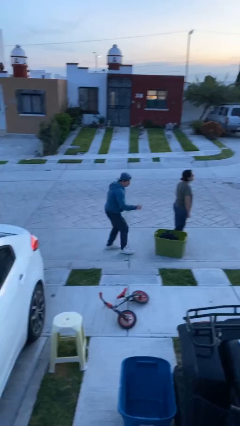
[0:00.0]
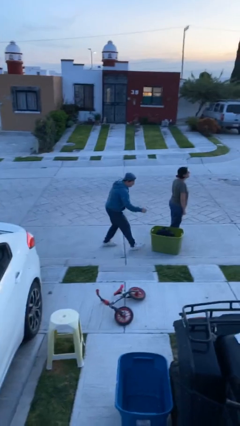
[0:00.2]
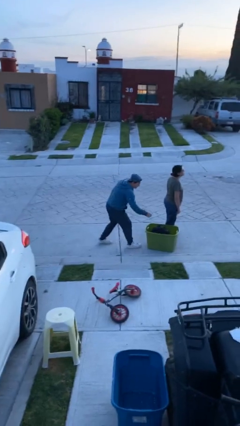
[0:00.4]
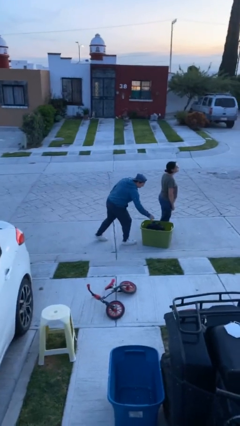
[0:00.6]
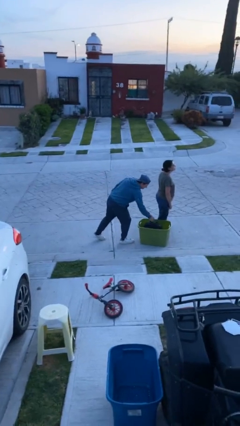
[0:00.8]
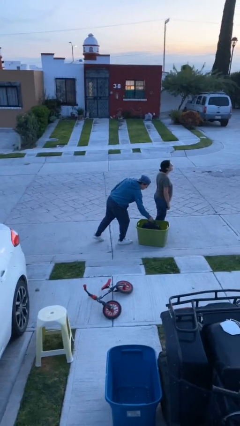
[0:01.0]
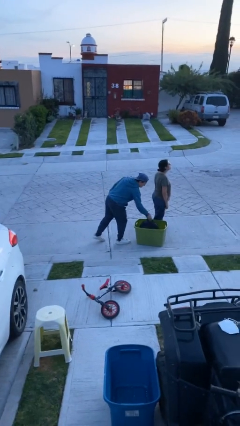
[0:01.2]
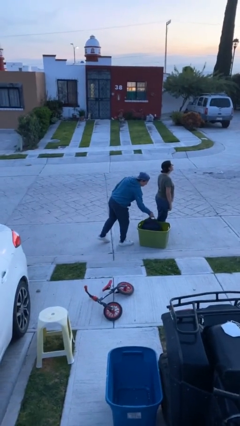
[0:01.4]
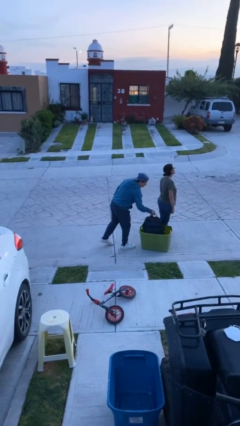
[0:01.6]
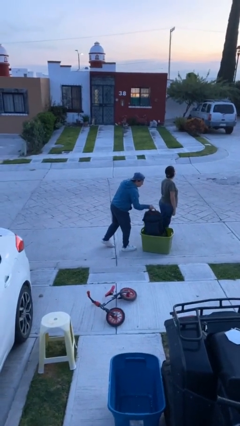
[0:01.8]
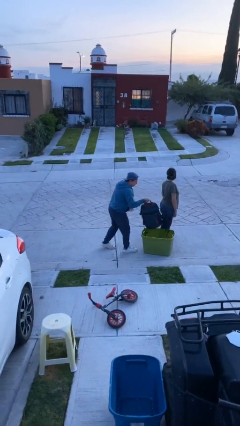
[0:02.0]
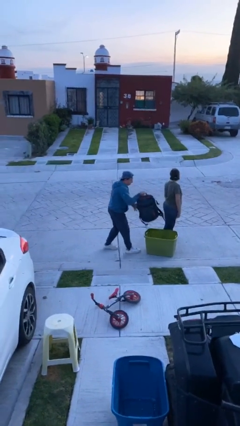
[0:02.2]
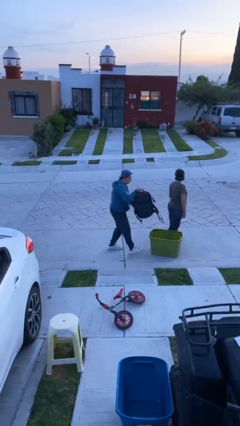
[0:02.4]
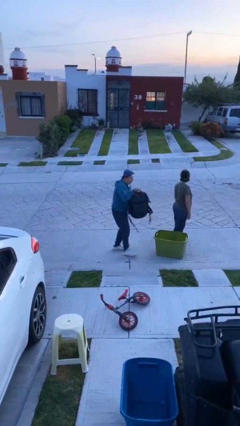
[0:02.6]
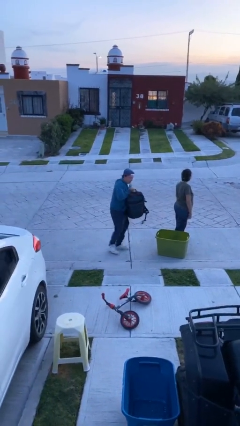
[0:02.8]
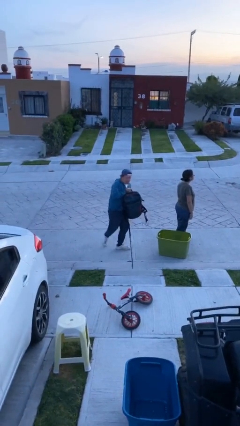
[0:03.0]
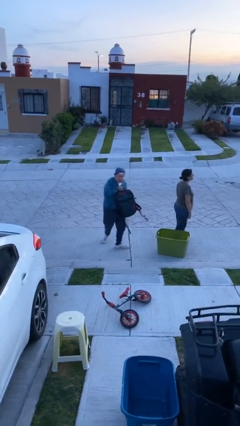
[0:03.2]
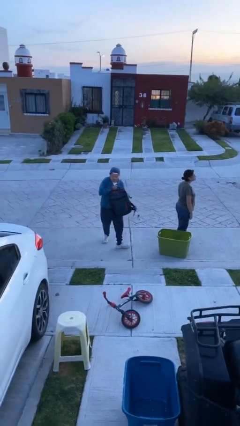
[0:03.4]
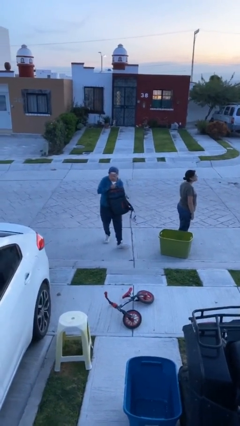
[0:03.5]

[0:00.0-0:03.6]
person steals object from person

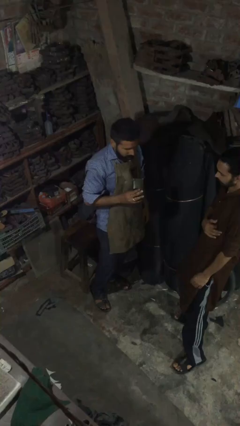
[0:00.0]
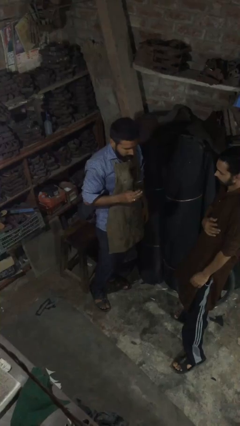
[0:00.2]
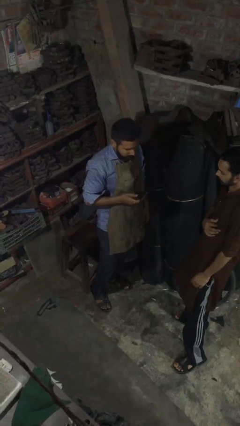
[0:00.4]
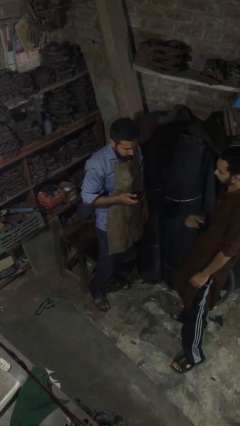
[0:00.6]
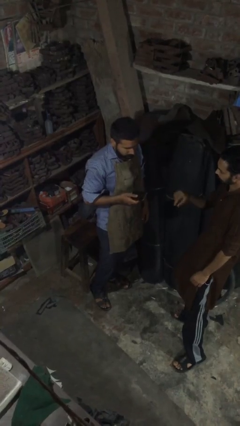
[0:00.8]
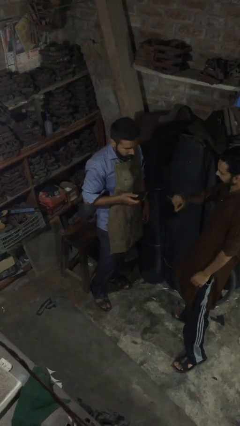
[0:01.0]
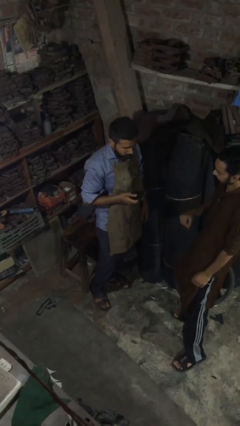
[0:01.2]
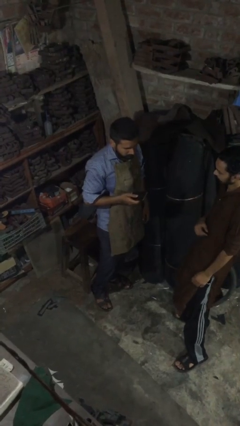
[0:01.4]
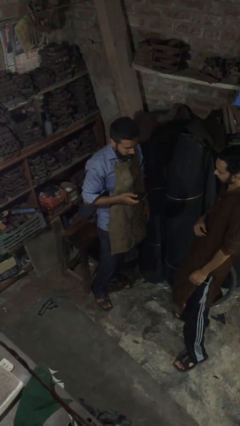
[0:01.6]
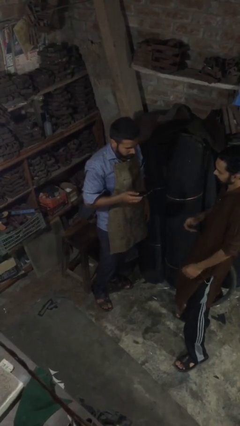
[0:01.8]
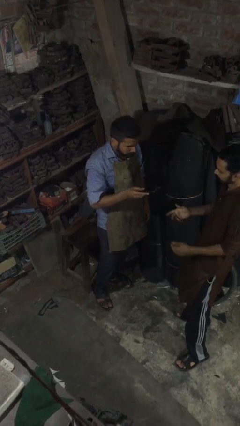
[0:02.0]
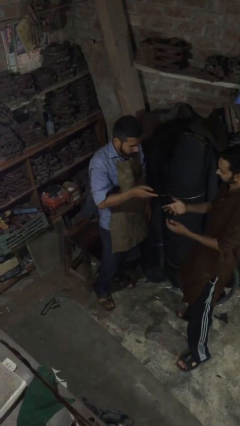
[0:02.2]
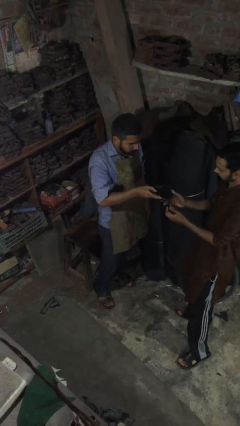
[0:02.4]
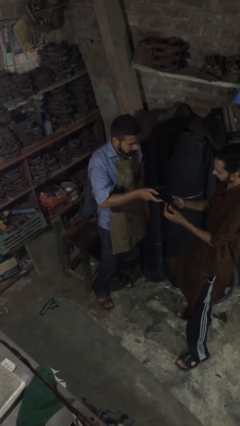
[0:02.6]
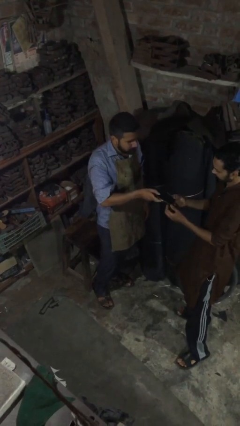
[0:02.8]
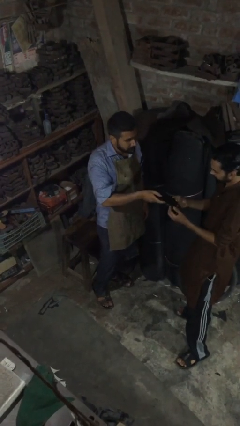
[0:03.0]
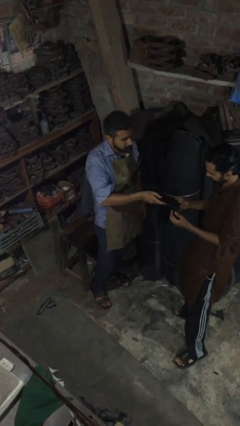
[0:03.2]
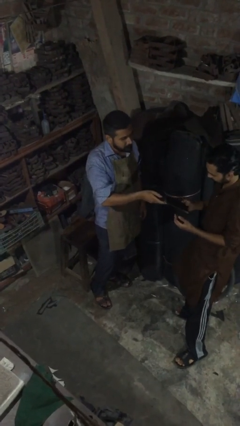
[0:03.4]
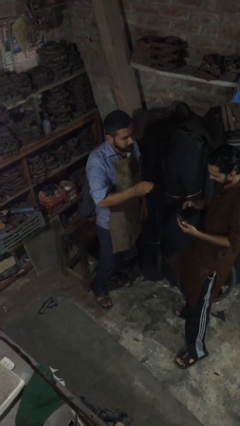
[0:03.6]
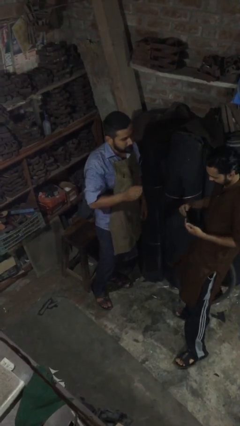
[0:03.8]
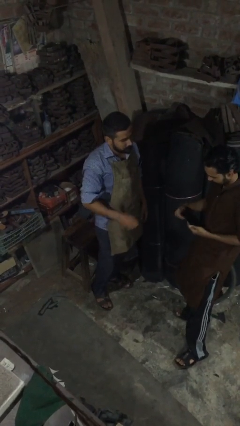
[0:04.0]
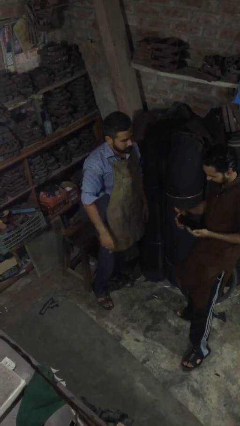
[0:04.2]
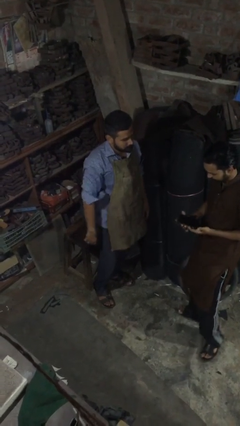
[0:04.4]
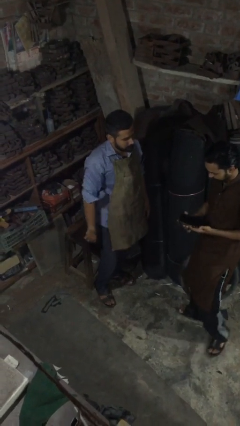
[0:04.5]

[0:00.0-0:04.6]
person transfers object to person

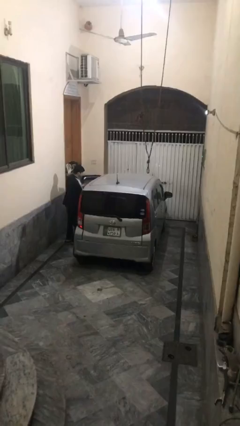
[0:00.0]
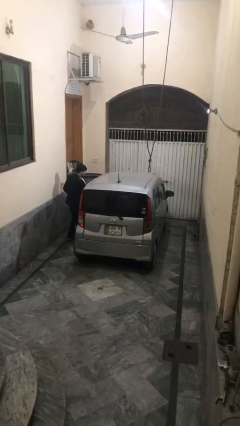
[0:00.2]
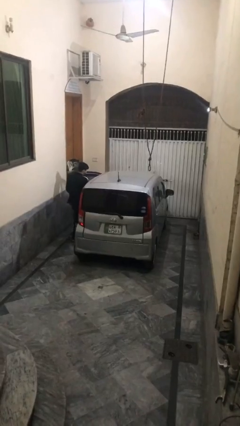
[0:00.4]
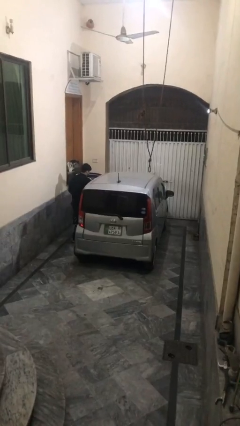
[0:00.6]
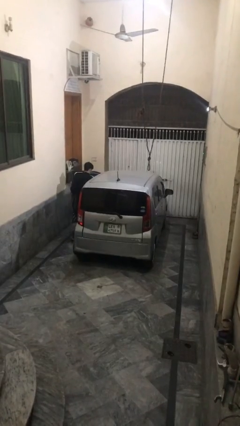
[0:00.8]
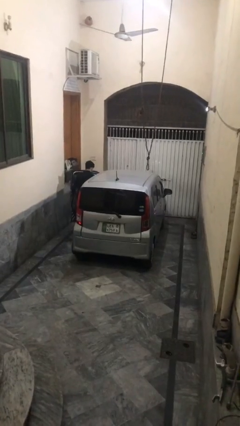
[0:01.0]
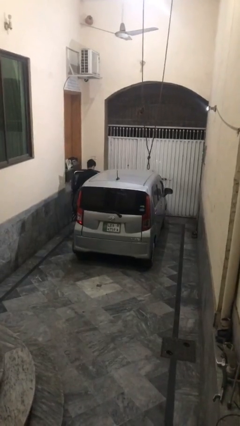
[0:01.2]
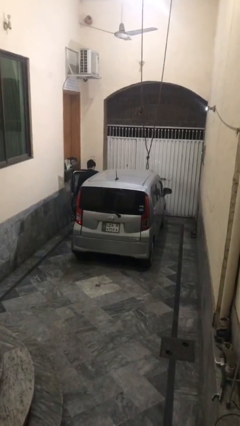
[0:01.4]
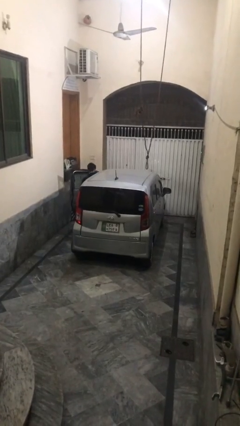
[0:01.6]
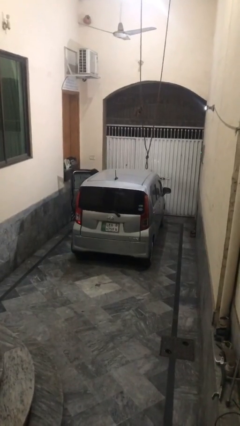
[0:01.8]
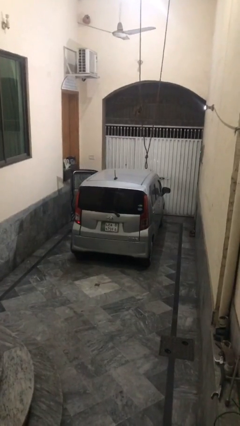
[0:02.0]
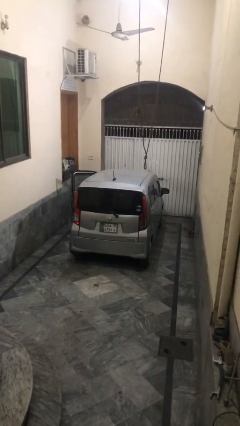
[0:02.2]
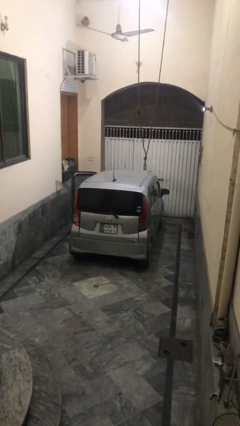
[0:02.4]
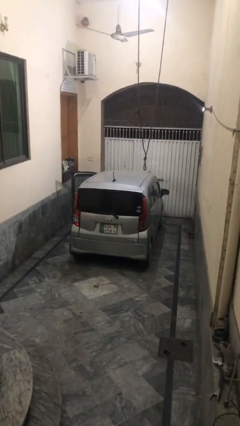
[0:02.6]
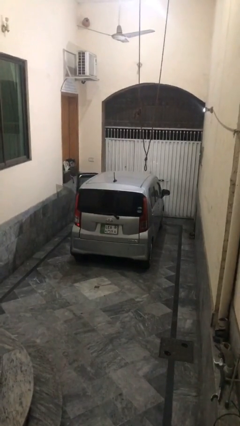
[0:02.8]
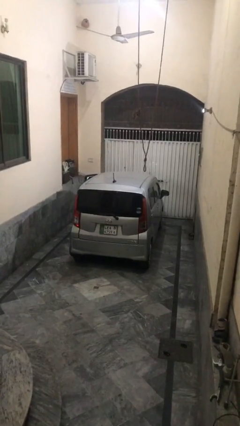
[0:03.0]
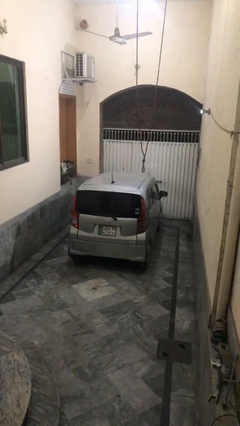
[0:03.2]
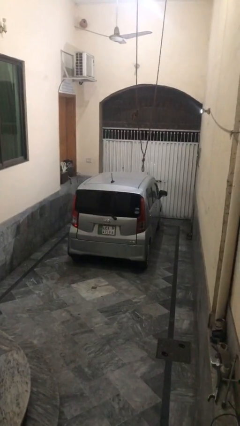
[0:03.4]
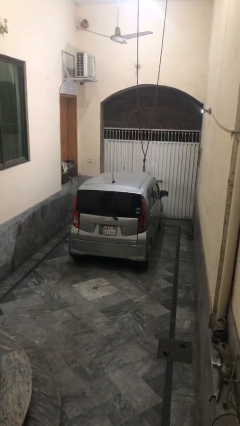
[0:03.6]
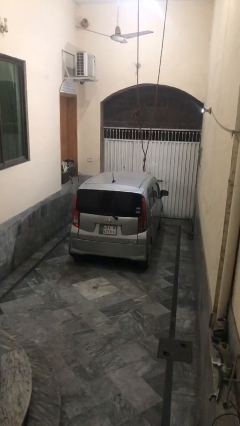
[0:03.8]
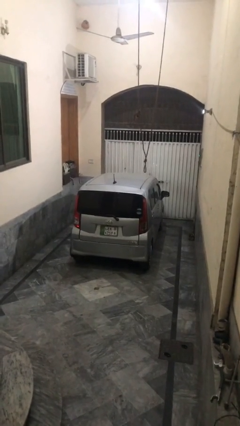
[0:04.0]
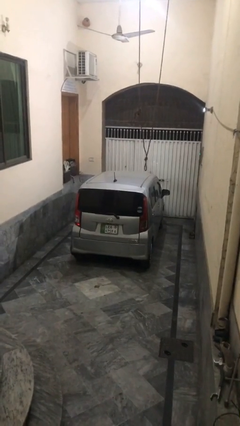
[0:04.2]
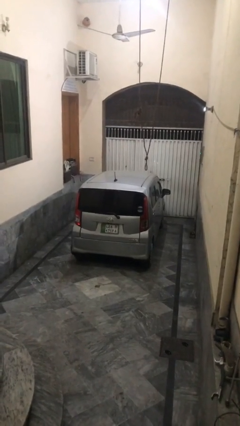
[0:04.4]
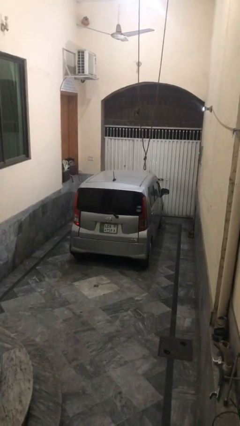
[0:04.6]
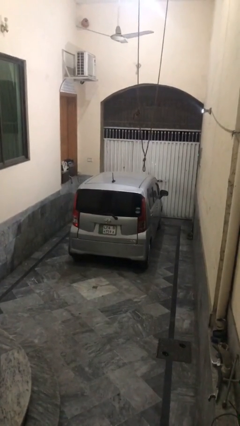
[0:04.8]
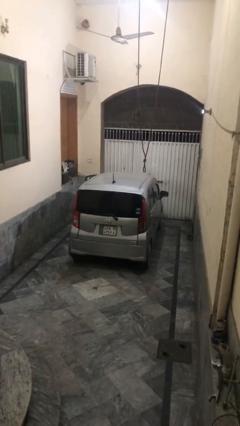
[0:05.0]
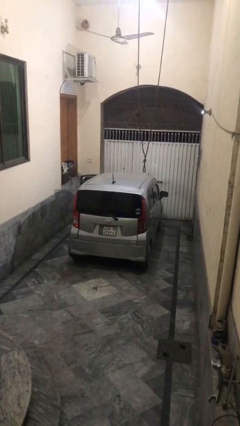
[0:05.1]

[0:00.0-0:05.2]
car picks up person

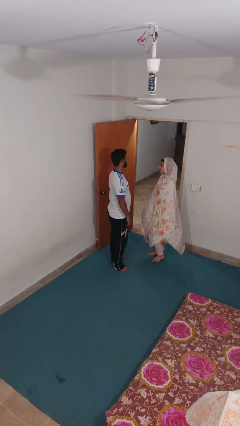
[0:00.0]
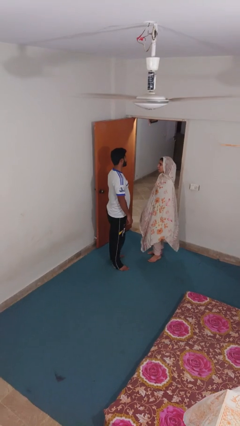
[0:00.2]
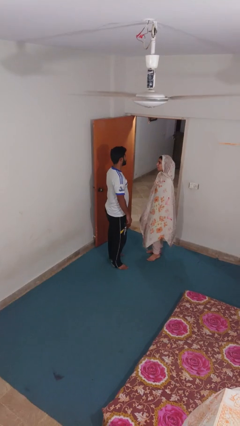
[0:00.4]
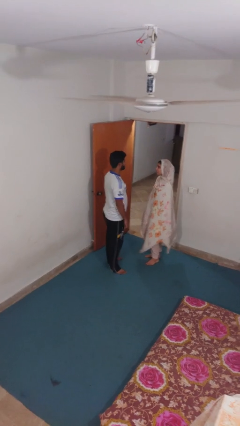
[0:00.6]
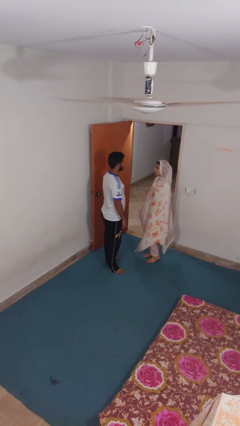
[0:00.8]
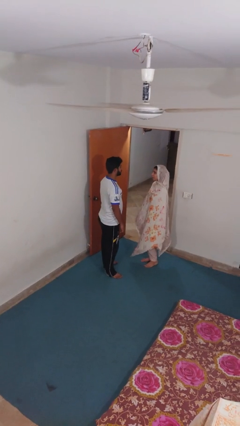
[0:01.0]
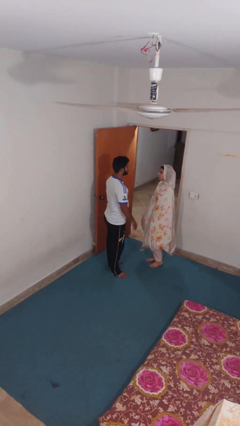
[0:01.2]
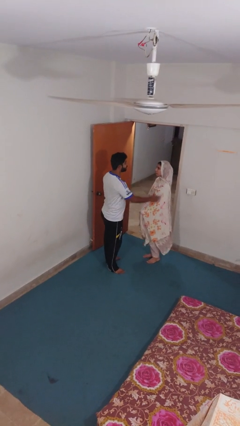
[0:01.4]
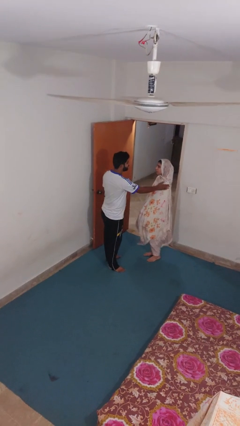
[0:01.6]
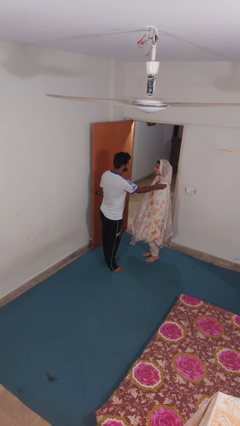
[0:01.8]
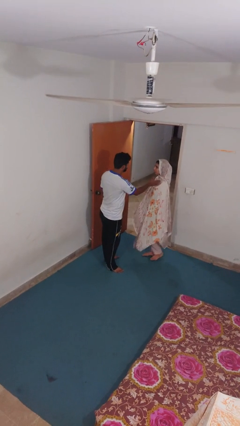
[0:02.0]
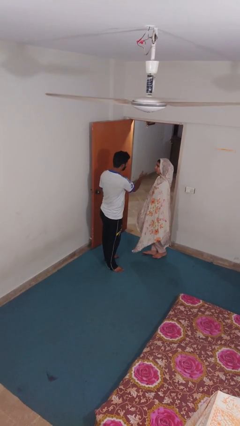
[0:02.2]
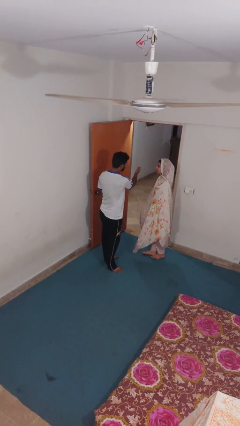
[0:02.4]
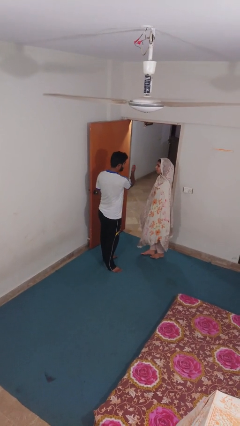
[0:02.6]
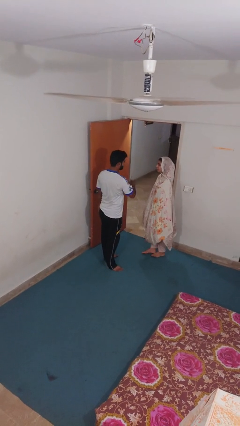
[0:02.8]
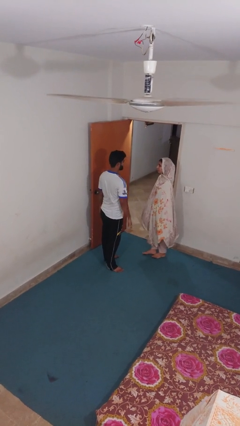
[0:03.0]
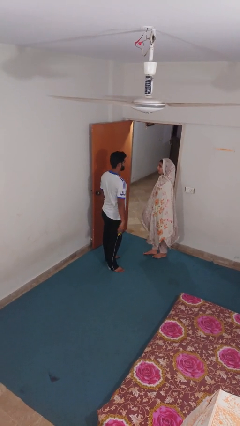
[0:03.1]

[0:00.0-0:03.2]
person shoves person

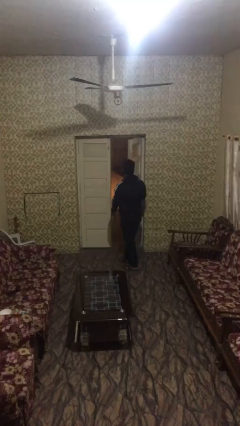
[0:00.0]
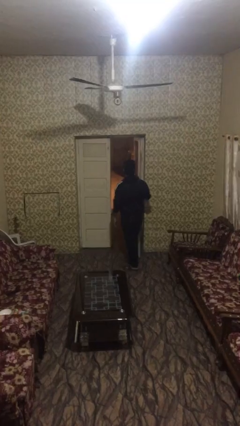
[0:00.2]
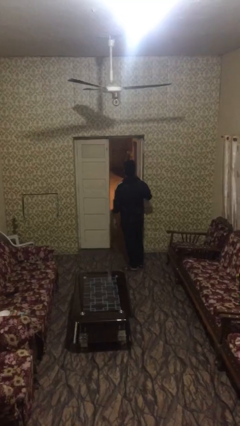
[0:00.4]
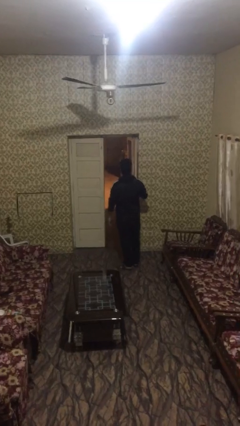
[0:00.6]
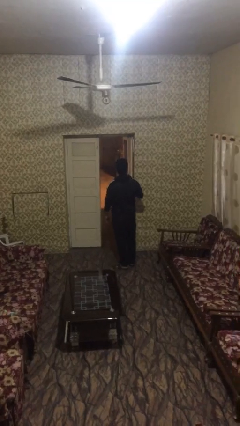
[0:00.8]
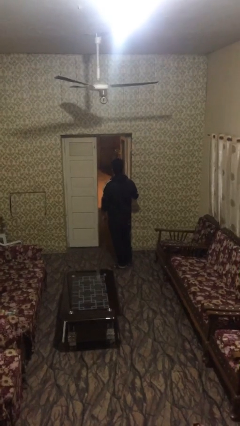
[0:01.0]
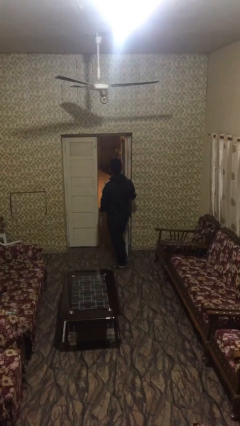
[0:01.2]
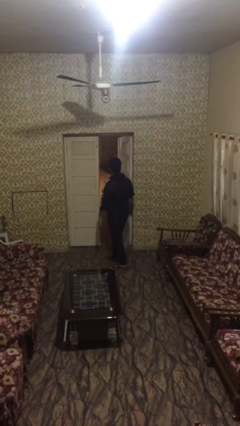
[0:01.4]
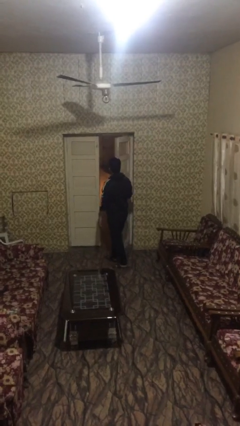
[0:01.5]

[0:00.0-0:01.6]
person opens facility door
